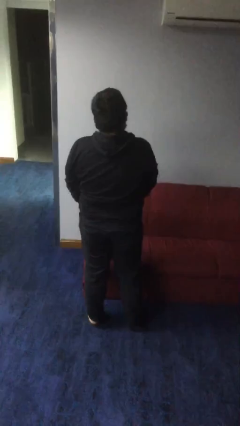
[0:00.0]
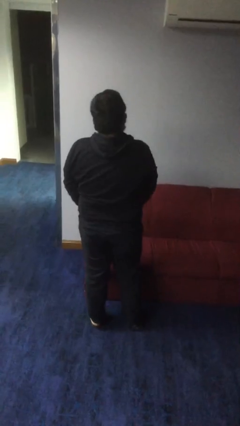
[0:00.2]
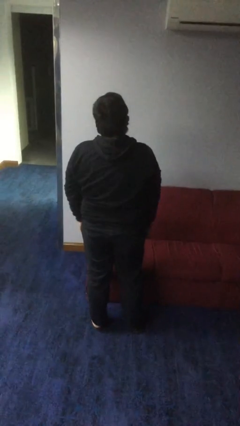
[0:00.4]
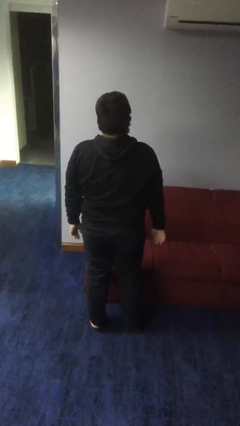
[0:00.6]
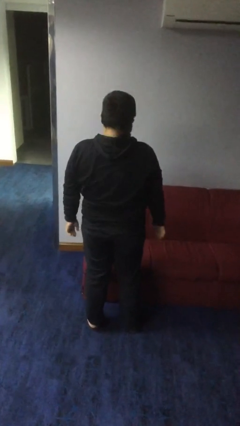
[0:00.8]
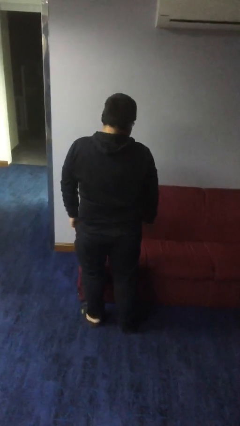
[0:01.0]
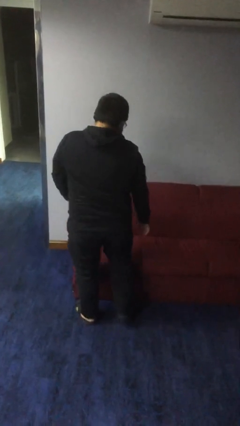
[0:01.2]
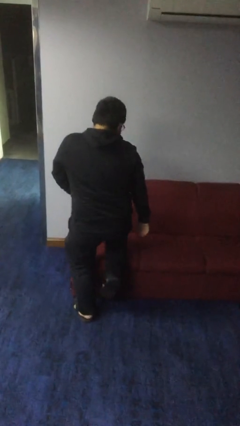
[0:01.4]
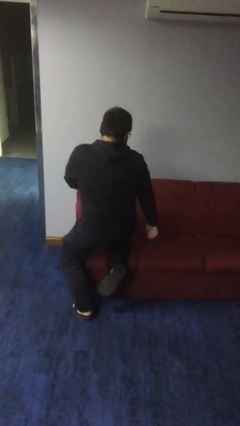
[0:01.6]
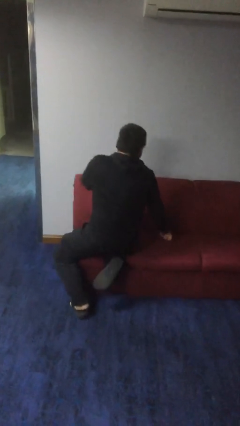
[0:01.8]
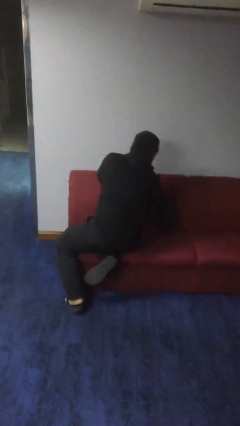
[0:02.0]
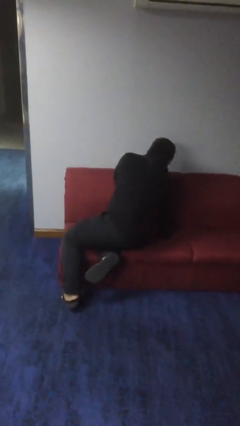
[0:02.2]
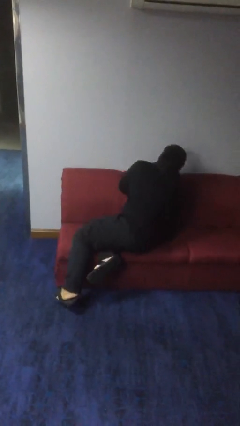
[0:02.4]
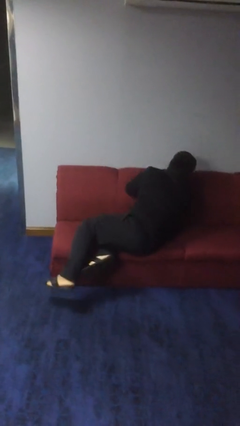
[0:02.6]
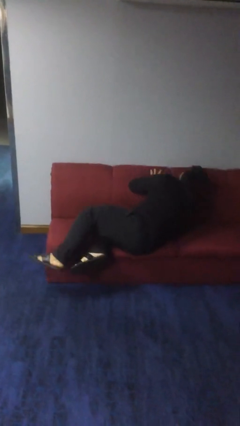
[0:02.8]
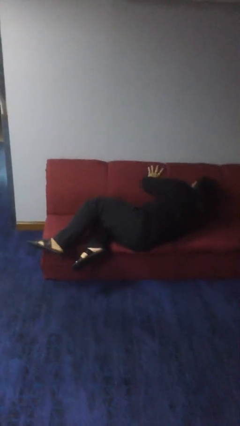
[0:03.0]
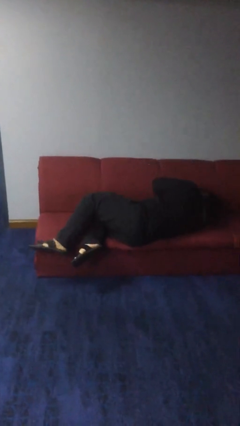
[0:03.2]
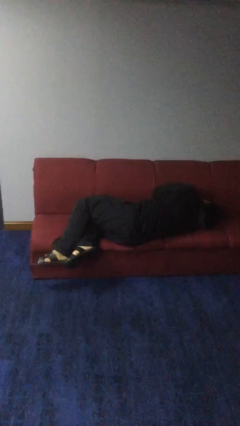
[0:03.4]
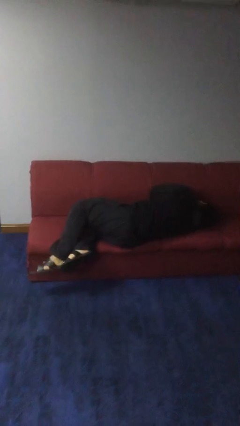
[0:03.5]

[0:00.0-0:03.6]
person lies down on couch

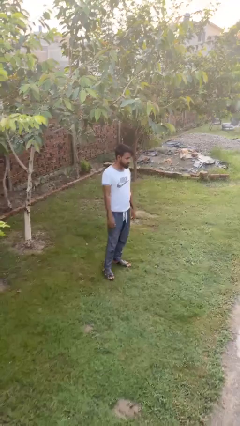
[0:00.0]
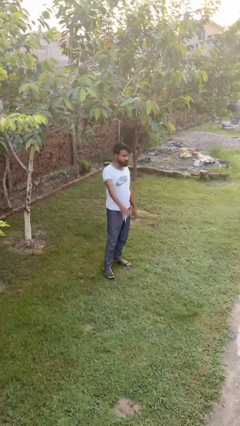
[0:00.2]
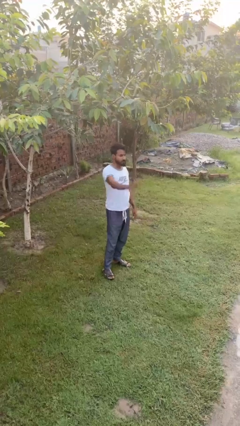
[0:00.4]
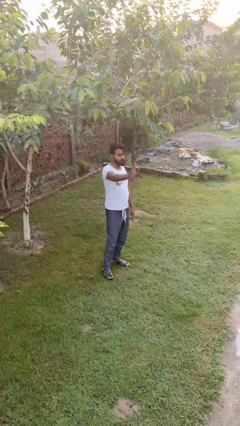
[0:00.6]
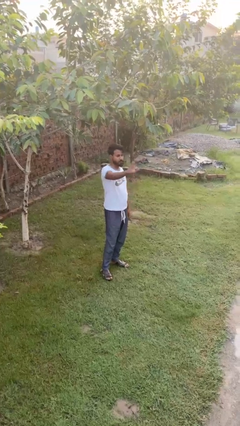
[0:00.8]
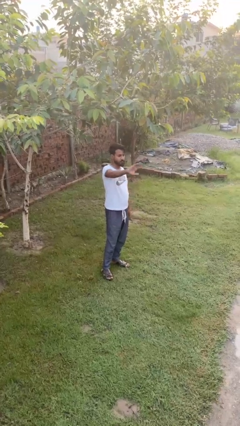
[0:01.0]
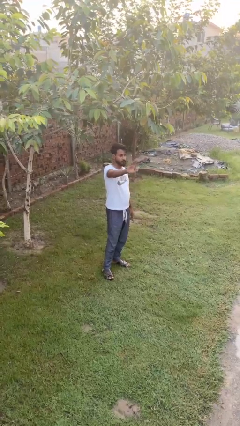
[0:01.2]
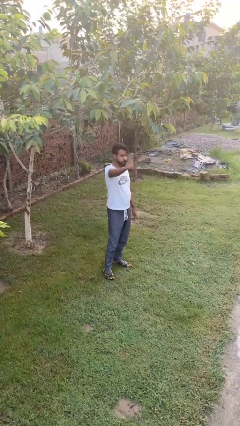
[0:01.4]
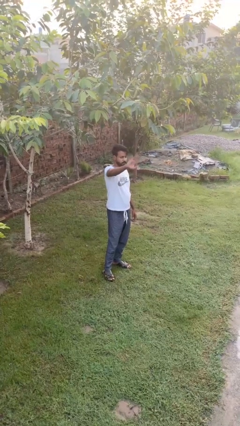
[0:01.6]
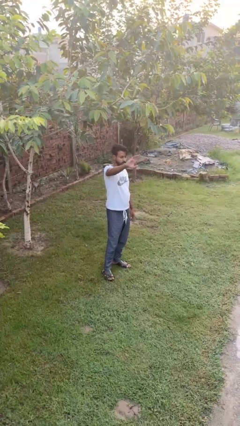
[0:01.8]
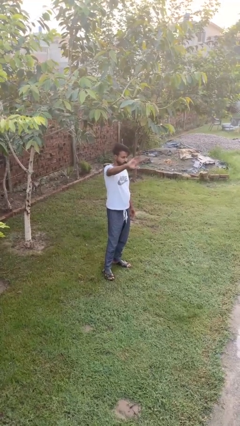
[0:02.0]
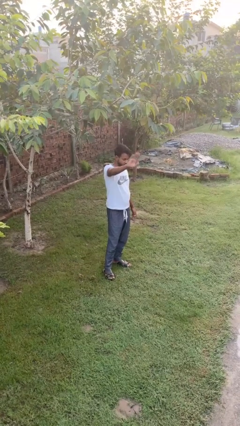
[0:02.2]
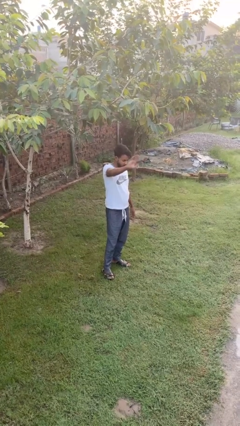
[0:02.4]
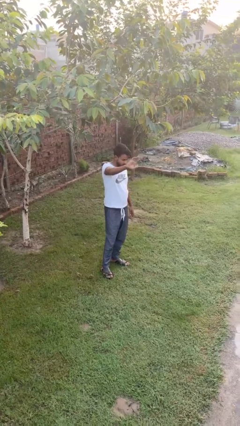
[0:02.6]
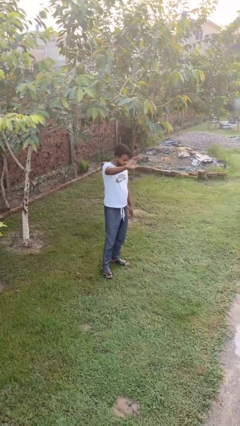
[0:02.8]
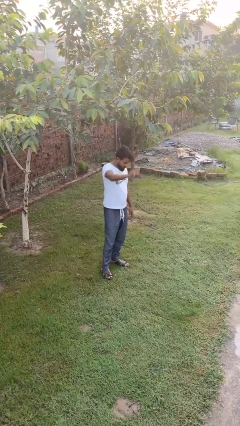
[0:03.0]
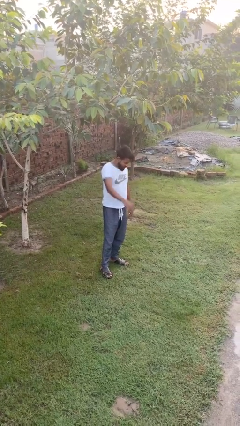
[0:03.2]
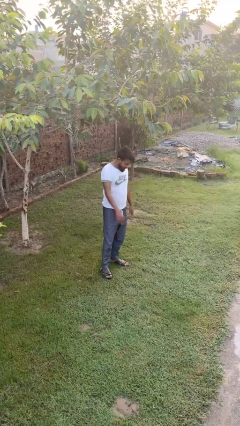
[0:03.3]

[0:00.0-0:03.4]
person waves at person

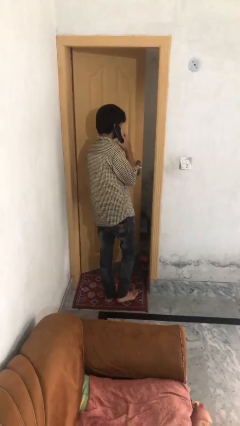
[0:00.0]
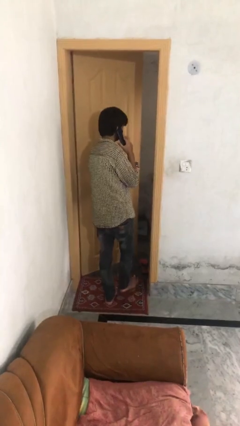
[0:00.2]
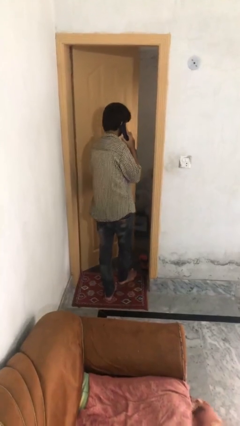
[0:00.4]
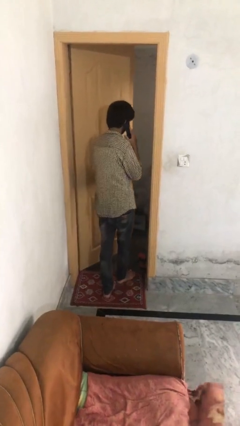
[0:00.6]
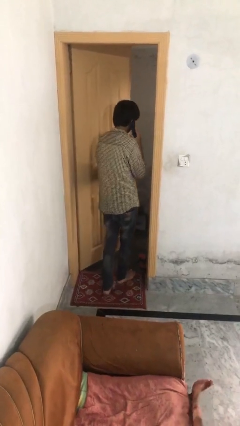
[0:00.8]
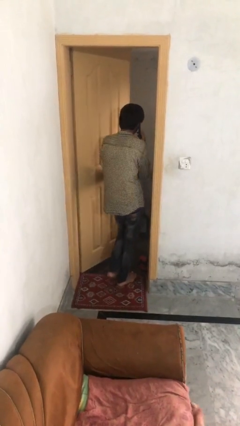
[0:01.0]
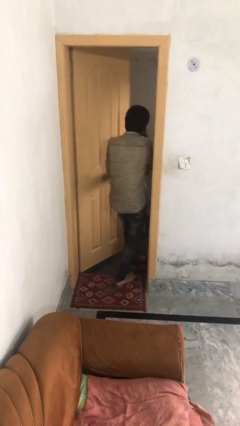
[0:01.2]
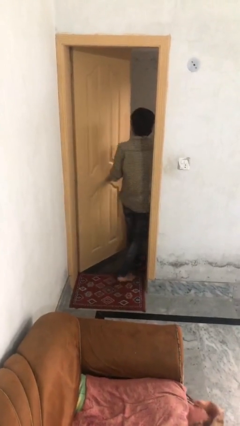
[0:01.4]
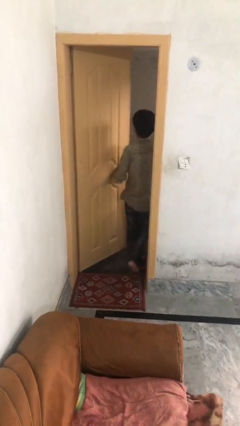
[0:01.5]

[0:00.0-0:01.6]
person exits scene through structure

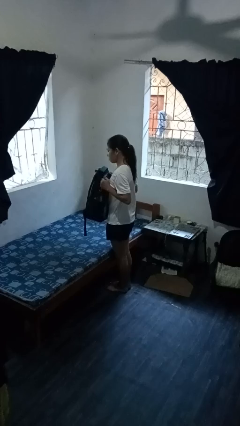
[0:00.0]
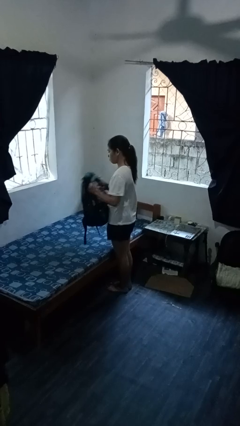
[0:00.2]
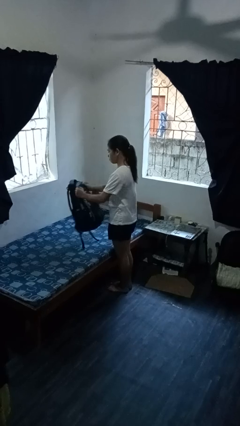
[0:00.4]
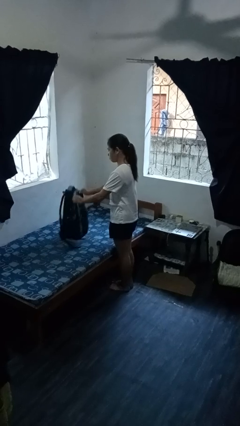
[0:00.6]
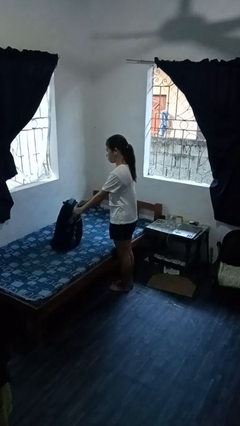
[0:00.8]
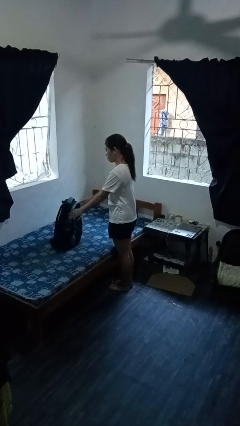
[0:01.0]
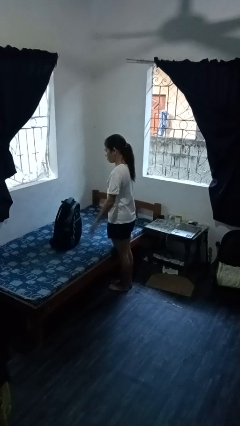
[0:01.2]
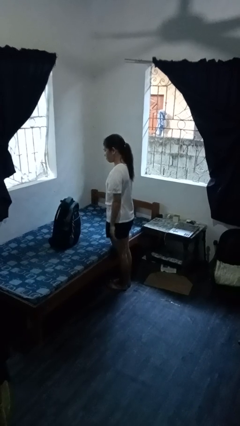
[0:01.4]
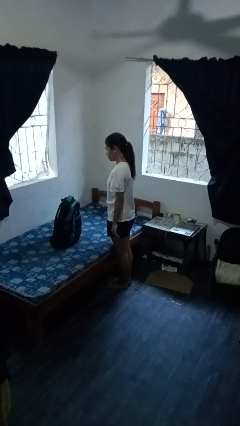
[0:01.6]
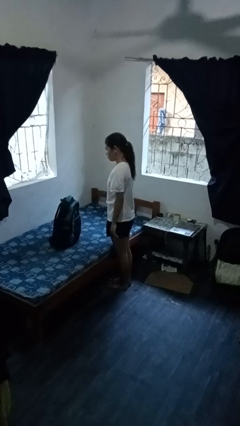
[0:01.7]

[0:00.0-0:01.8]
person puts down object on bed

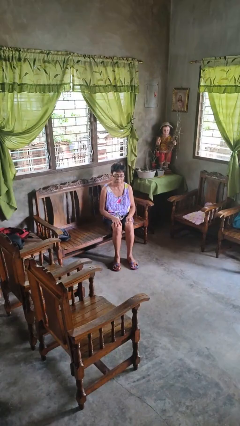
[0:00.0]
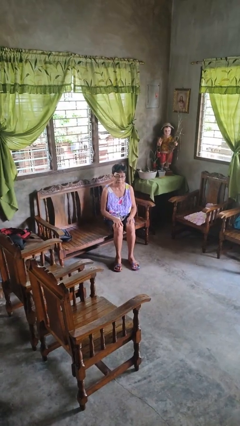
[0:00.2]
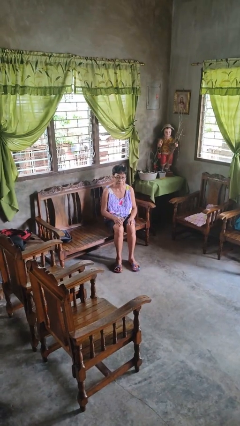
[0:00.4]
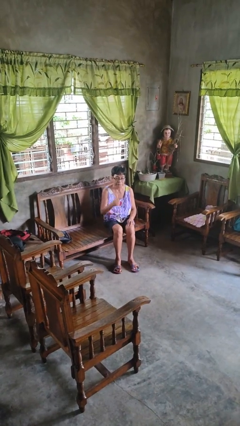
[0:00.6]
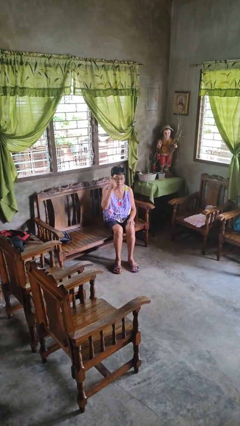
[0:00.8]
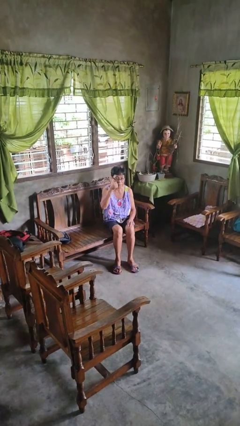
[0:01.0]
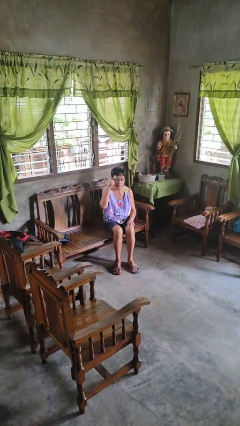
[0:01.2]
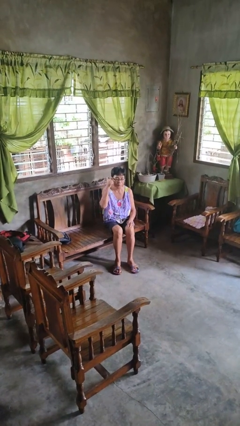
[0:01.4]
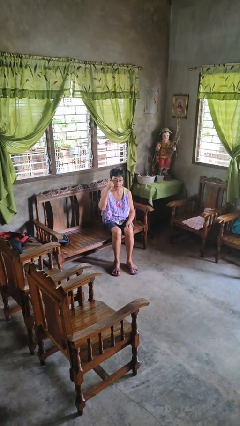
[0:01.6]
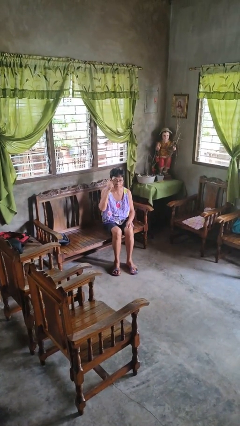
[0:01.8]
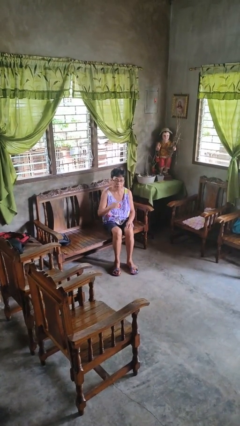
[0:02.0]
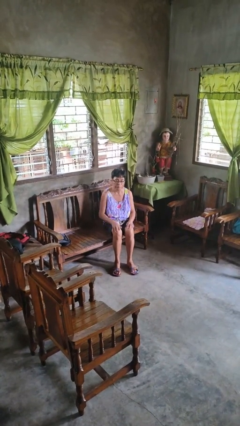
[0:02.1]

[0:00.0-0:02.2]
person gestures behind me

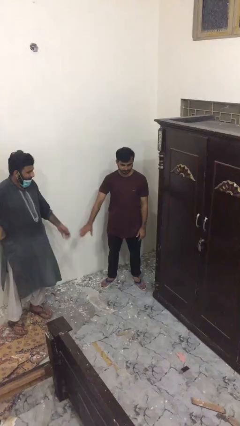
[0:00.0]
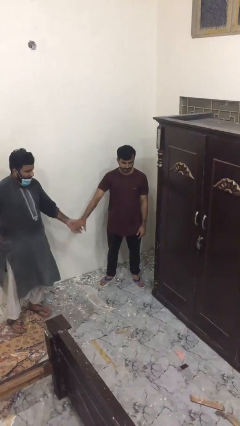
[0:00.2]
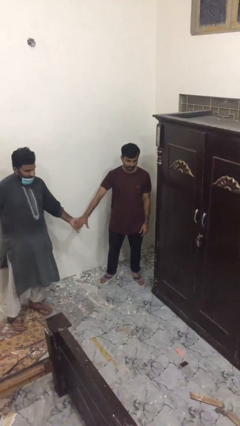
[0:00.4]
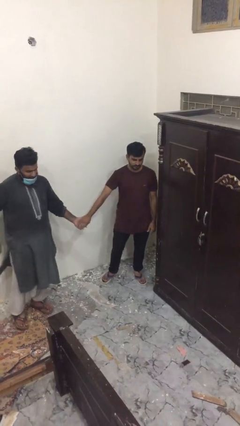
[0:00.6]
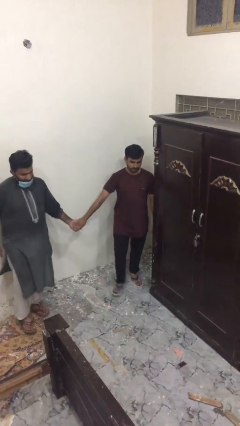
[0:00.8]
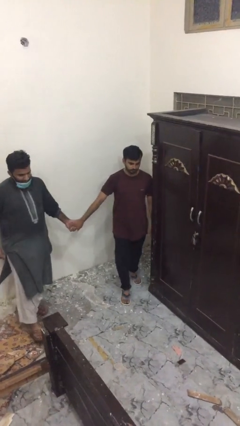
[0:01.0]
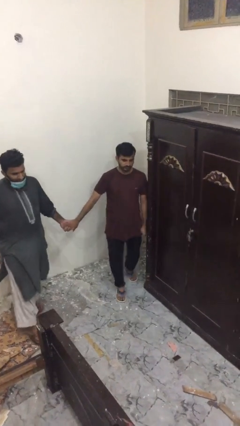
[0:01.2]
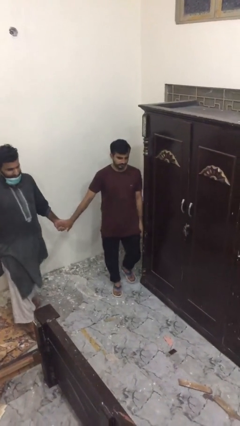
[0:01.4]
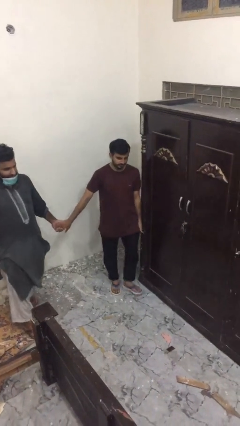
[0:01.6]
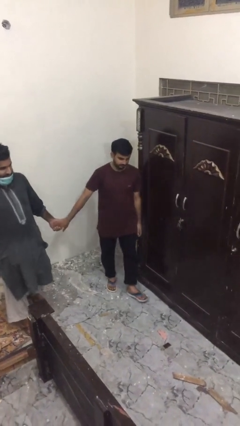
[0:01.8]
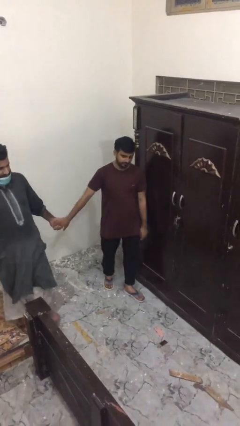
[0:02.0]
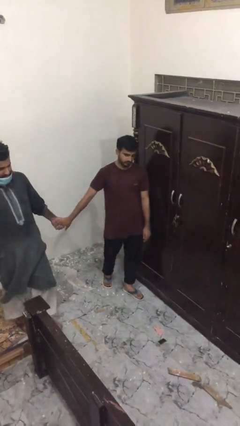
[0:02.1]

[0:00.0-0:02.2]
person holds hand

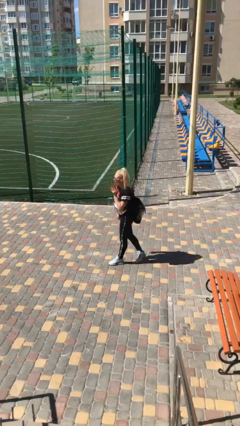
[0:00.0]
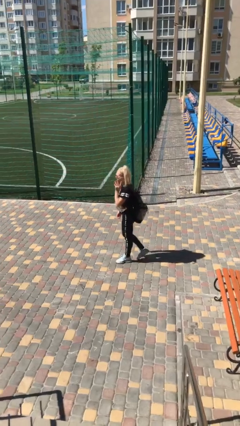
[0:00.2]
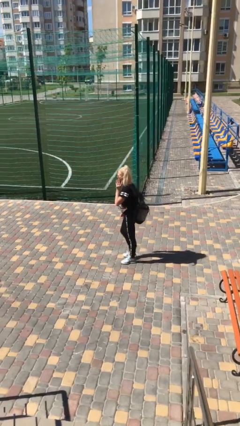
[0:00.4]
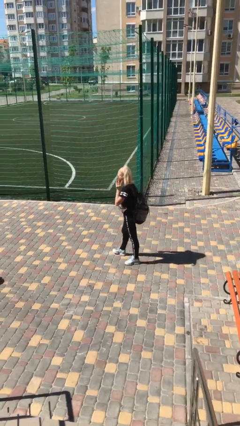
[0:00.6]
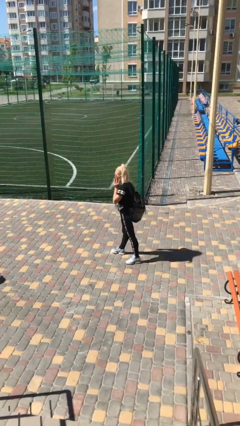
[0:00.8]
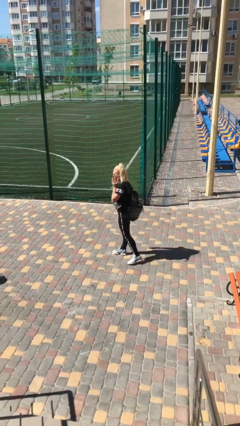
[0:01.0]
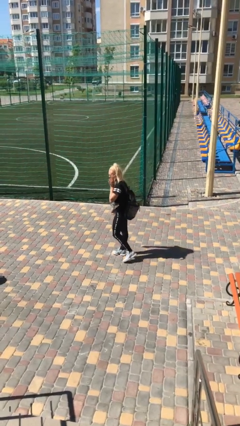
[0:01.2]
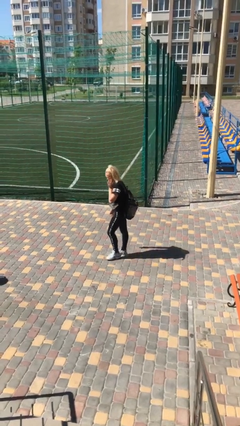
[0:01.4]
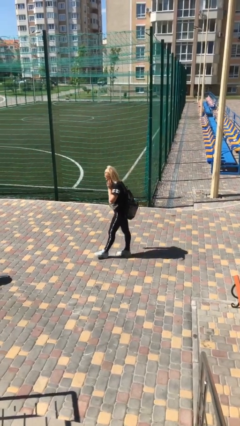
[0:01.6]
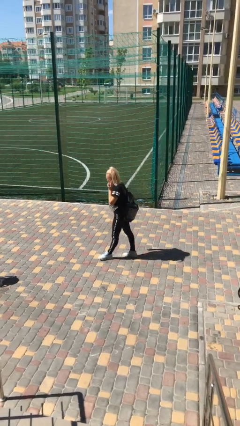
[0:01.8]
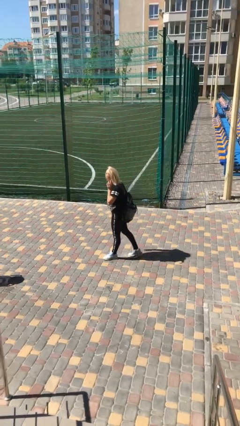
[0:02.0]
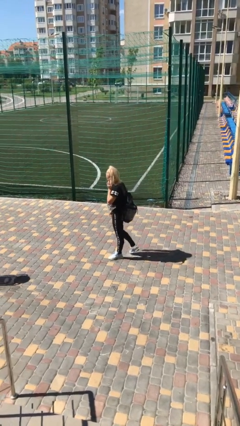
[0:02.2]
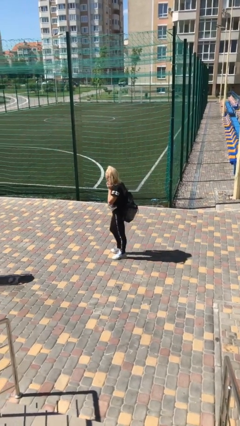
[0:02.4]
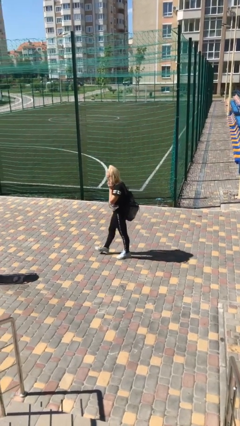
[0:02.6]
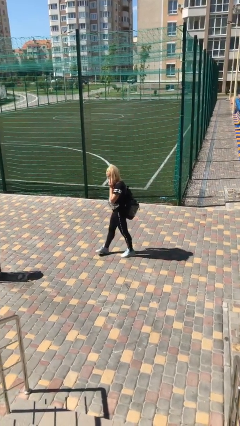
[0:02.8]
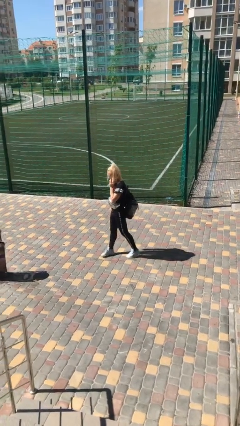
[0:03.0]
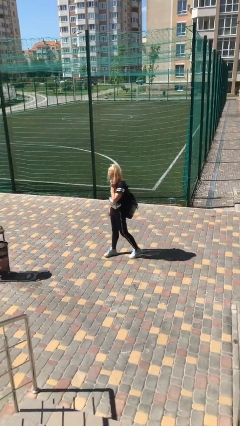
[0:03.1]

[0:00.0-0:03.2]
person talks on phone
